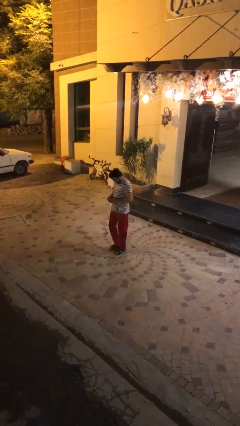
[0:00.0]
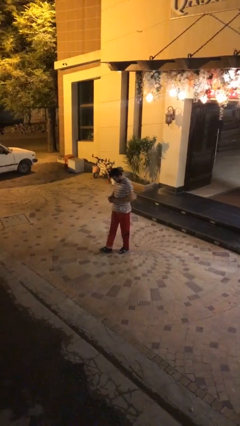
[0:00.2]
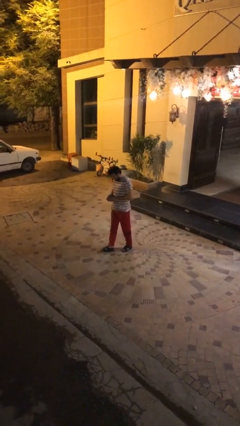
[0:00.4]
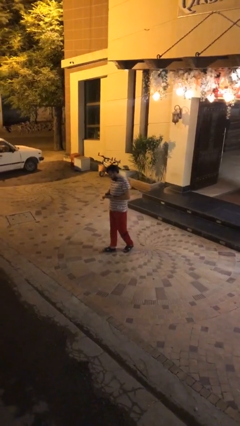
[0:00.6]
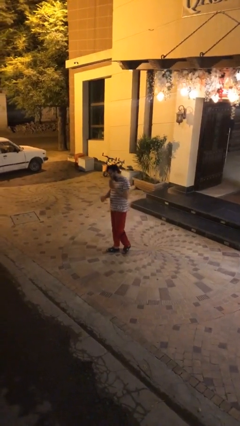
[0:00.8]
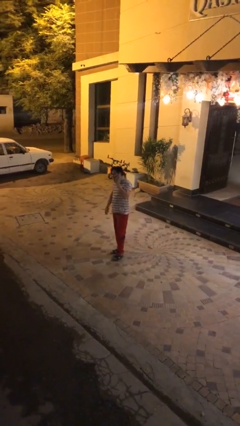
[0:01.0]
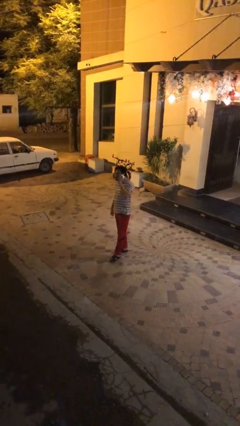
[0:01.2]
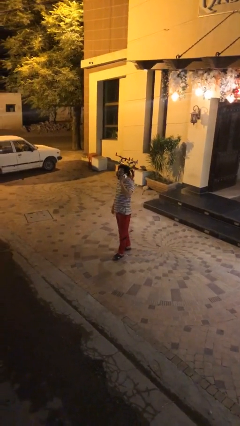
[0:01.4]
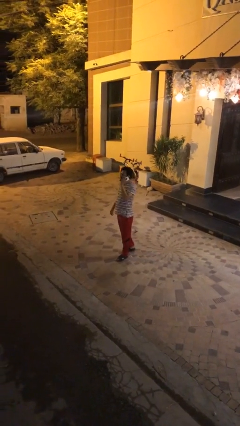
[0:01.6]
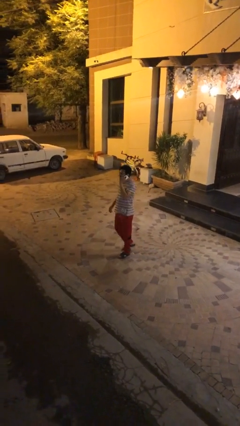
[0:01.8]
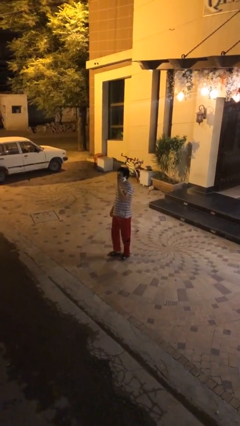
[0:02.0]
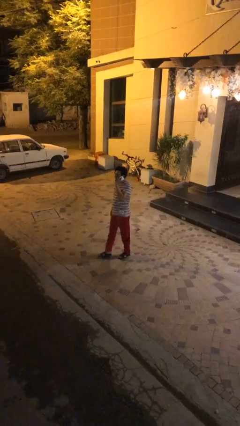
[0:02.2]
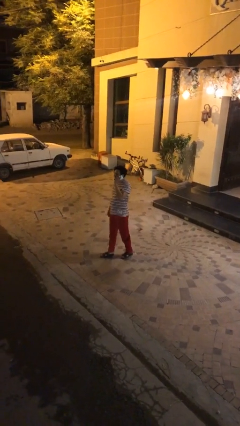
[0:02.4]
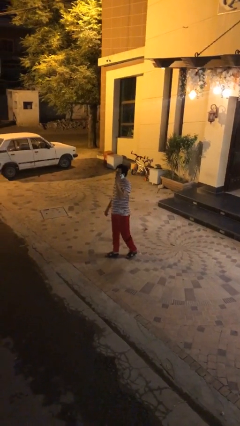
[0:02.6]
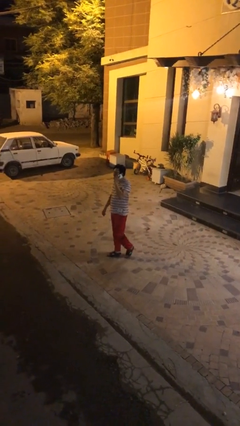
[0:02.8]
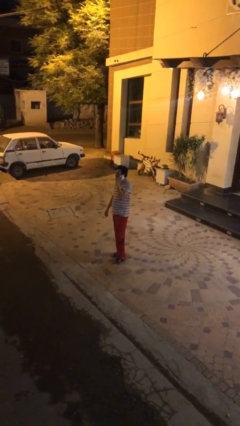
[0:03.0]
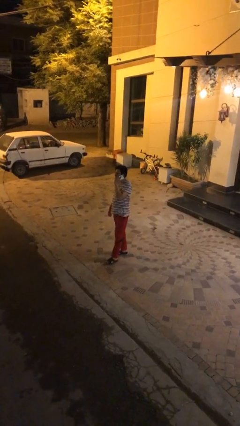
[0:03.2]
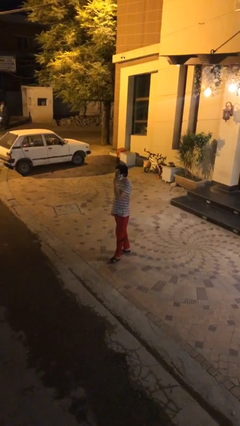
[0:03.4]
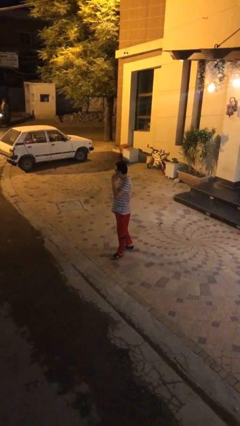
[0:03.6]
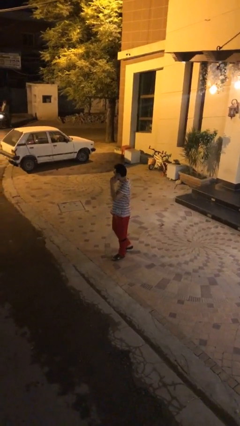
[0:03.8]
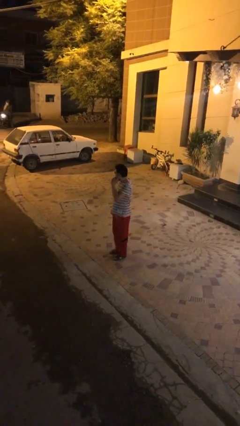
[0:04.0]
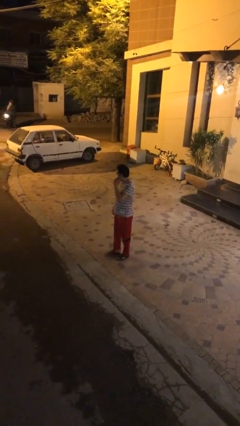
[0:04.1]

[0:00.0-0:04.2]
person talks on phone

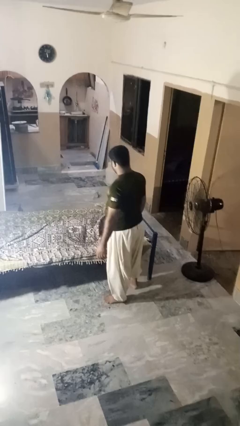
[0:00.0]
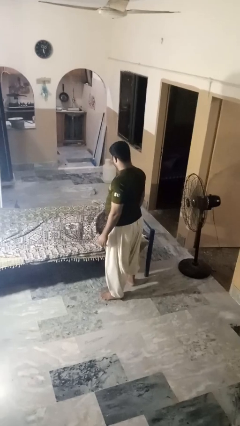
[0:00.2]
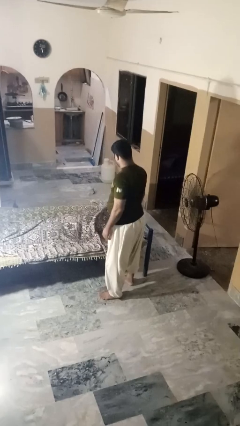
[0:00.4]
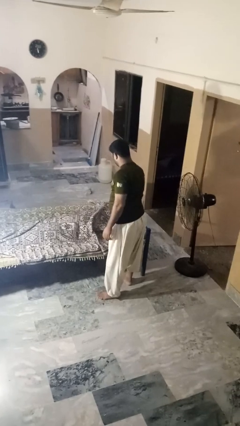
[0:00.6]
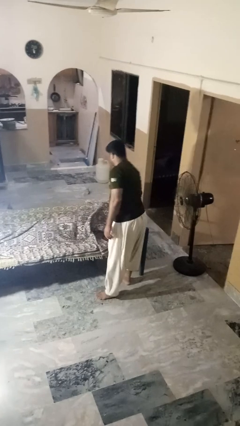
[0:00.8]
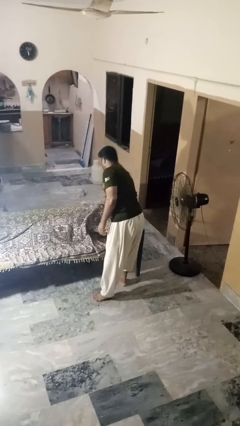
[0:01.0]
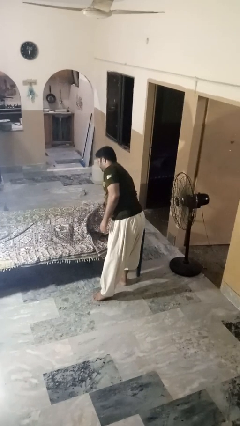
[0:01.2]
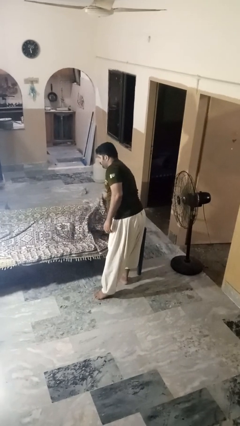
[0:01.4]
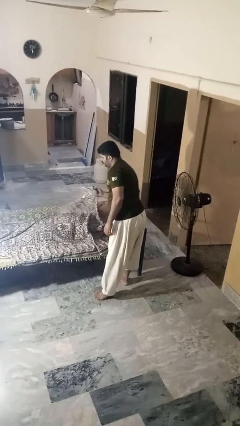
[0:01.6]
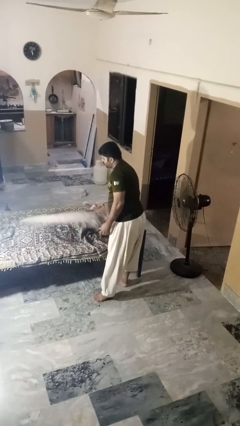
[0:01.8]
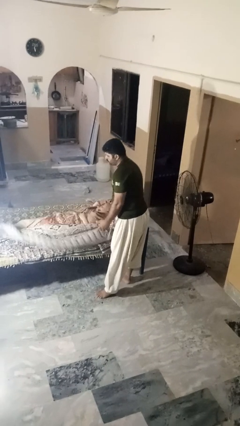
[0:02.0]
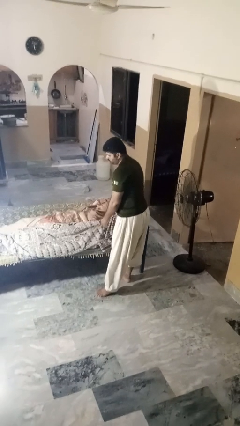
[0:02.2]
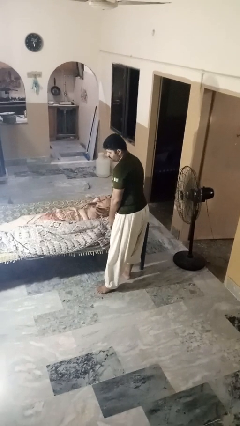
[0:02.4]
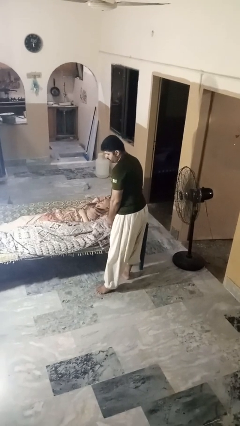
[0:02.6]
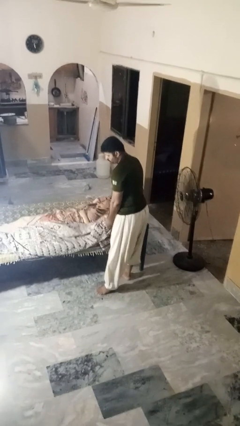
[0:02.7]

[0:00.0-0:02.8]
person uncovers friend with blanket

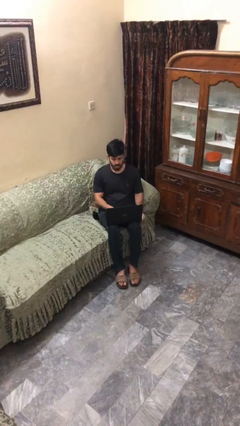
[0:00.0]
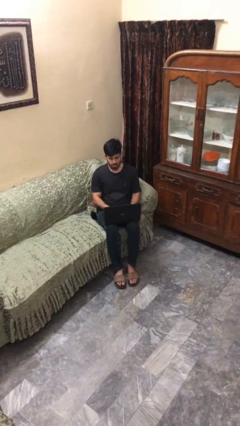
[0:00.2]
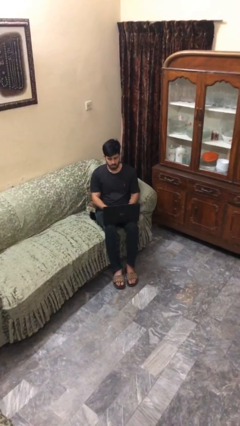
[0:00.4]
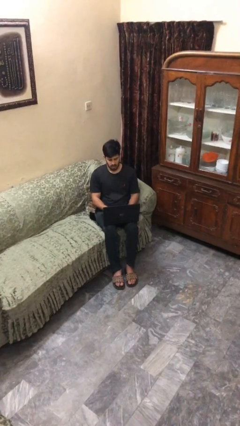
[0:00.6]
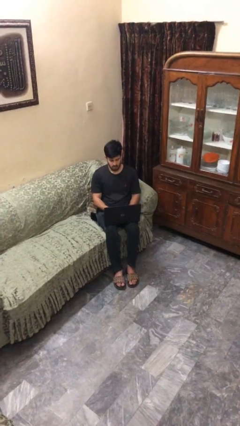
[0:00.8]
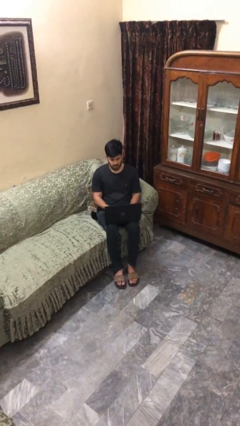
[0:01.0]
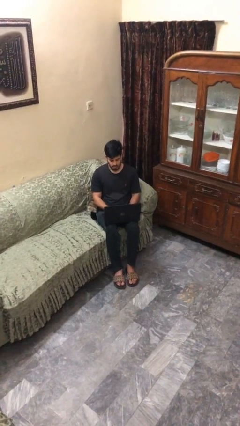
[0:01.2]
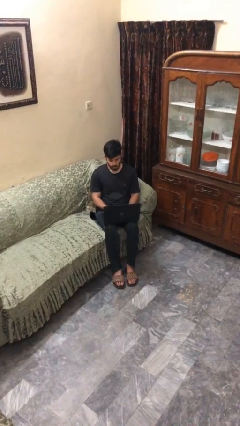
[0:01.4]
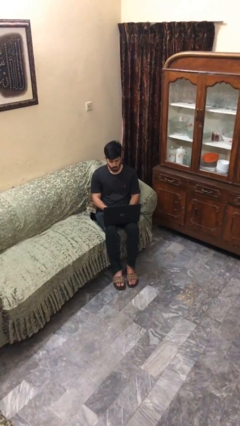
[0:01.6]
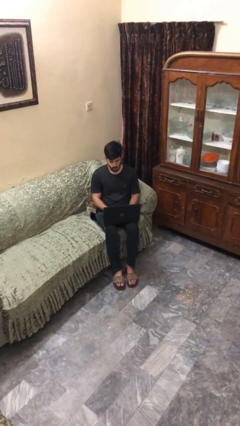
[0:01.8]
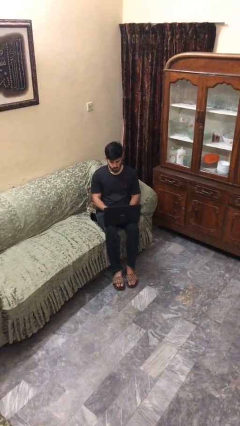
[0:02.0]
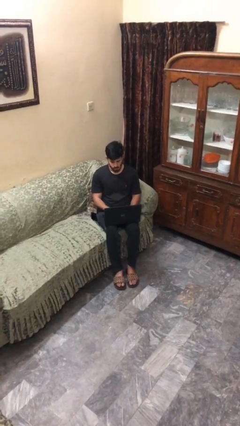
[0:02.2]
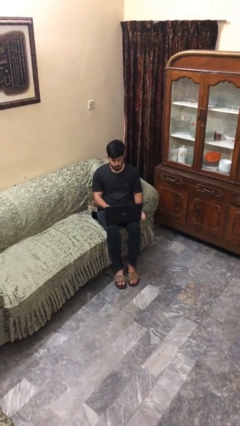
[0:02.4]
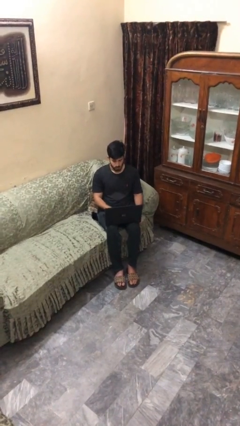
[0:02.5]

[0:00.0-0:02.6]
person interacts with laptop

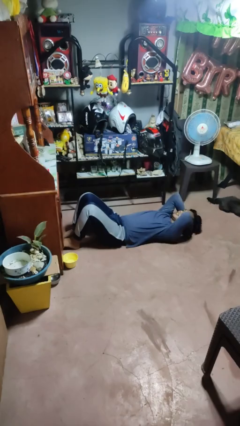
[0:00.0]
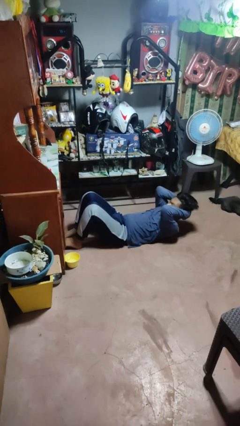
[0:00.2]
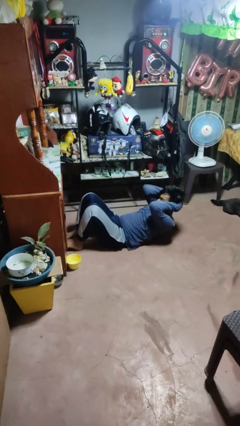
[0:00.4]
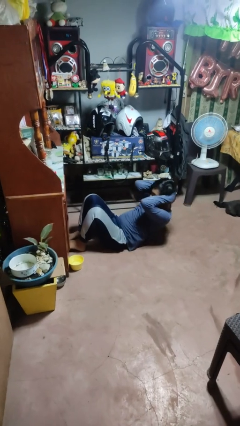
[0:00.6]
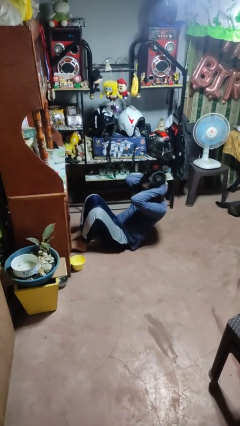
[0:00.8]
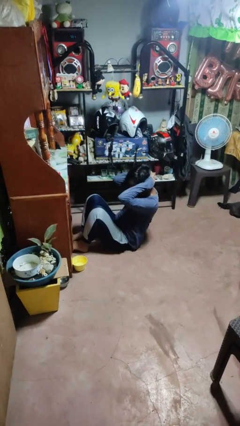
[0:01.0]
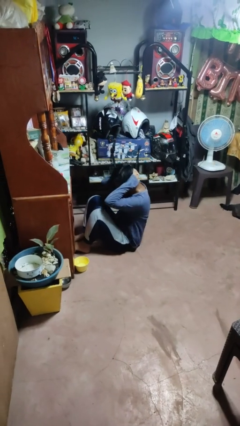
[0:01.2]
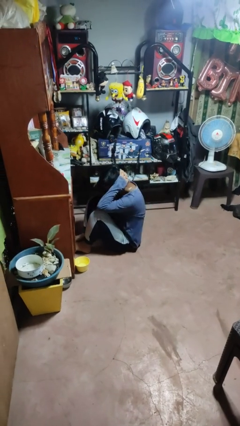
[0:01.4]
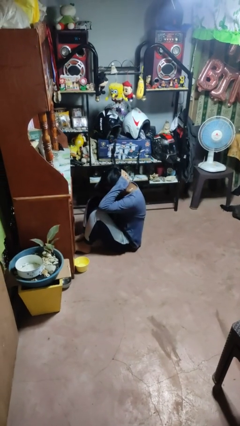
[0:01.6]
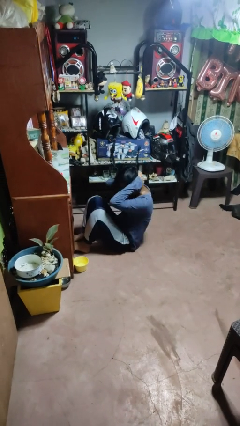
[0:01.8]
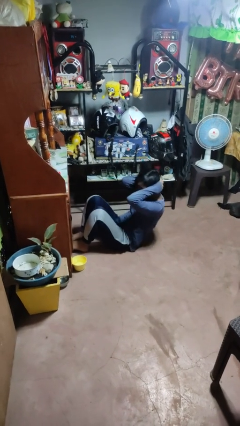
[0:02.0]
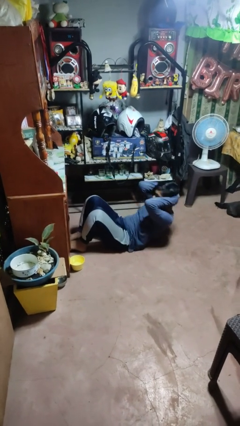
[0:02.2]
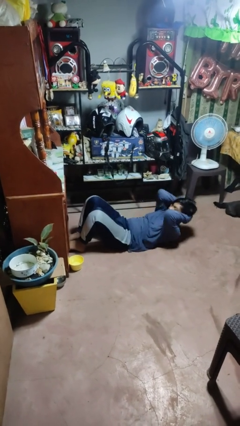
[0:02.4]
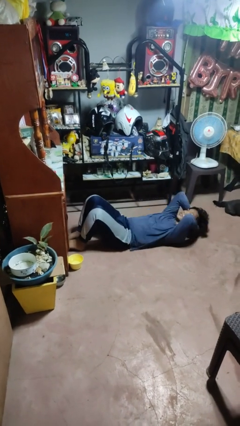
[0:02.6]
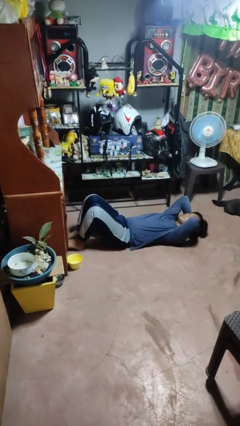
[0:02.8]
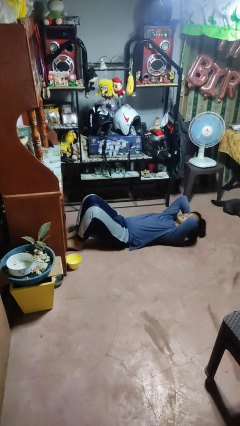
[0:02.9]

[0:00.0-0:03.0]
person exercises with situp

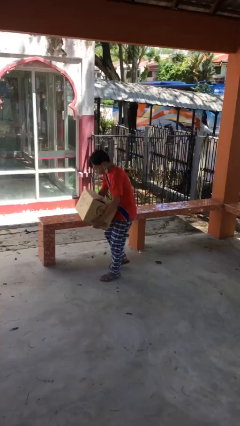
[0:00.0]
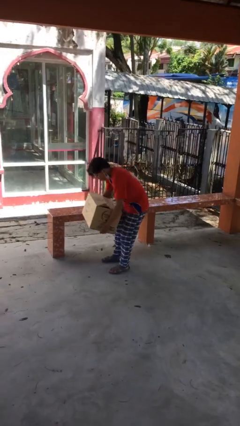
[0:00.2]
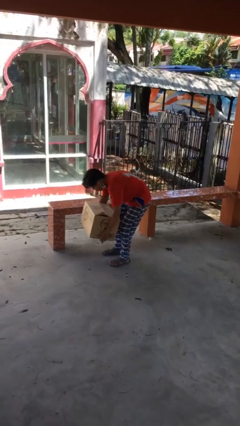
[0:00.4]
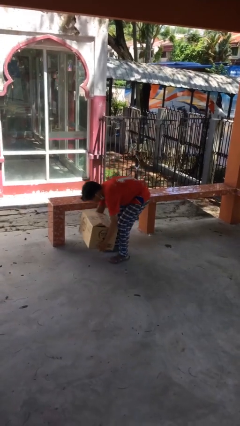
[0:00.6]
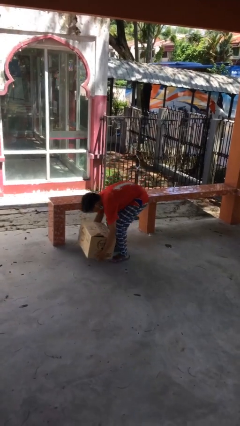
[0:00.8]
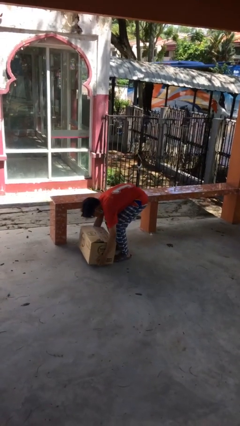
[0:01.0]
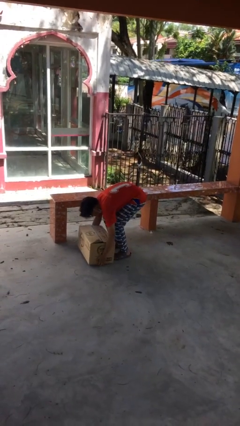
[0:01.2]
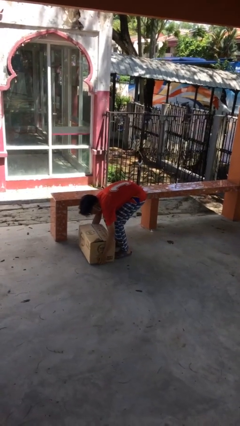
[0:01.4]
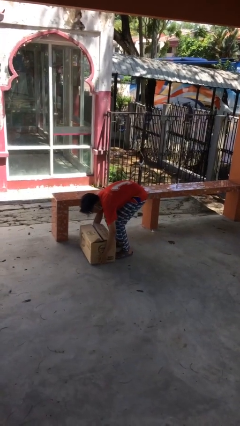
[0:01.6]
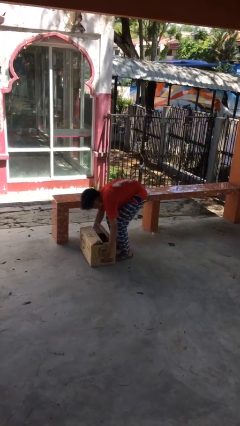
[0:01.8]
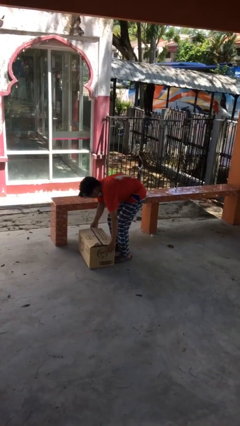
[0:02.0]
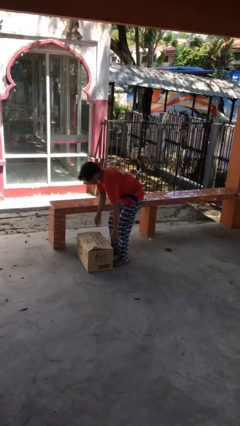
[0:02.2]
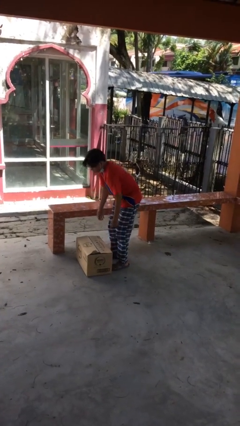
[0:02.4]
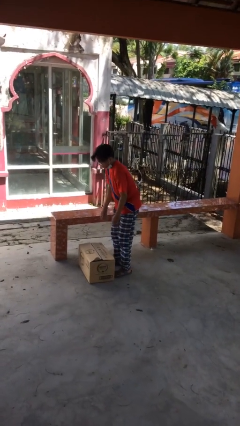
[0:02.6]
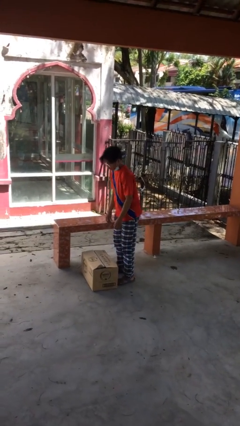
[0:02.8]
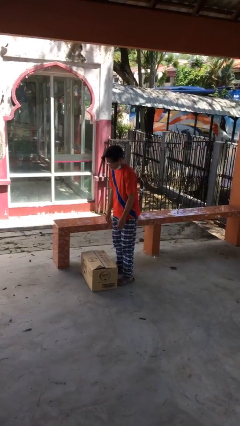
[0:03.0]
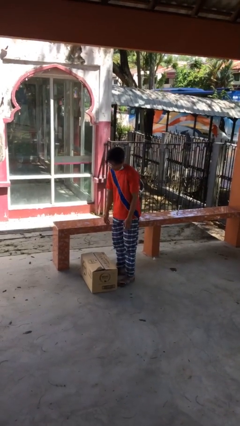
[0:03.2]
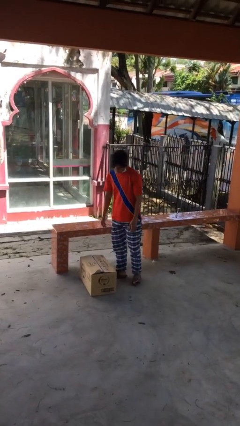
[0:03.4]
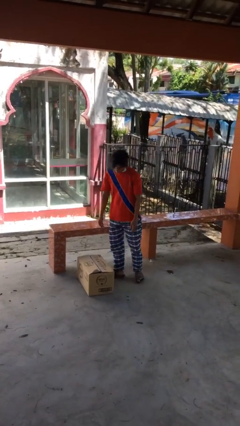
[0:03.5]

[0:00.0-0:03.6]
person puts down object on floor

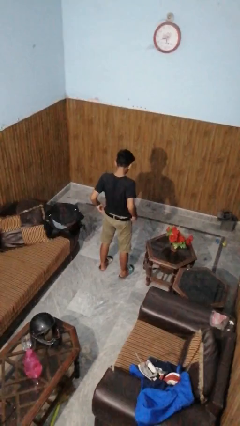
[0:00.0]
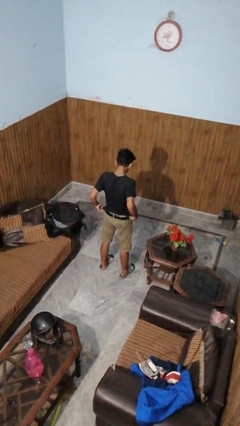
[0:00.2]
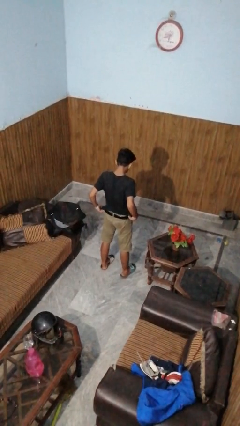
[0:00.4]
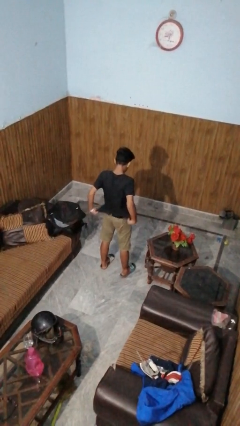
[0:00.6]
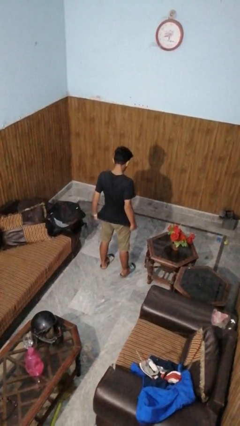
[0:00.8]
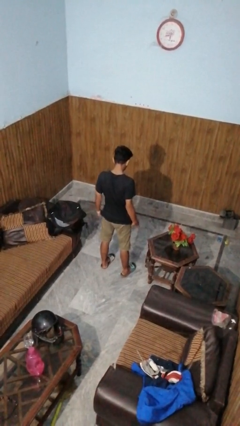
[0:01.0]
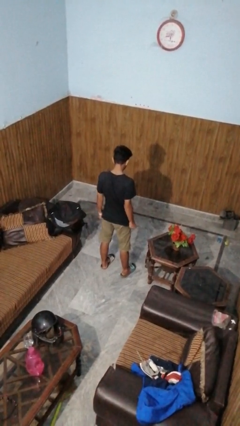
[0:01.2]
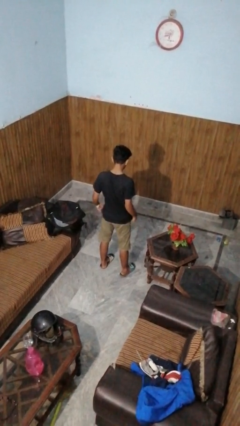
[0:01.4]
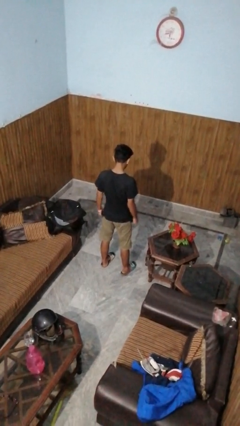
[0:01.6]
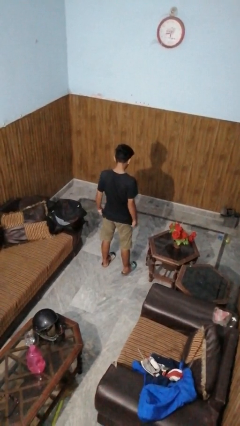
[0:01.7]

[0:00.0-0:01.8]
person untucks shirt
